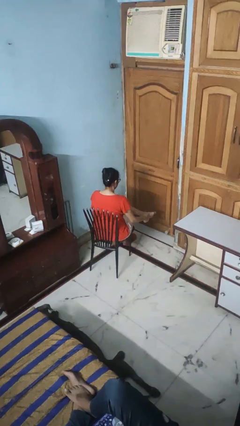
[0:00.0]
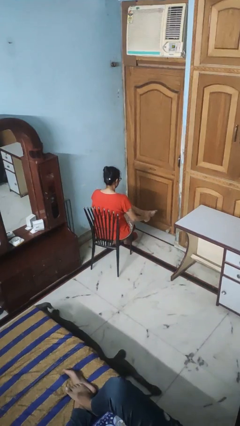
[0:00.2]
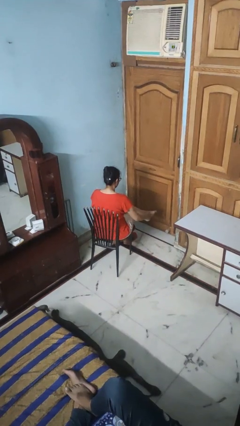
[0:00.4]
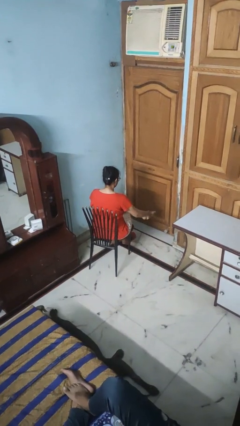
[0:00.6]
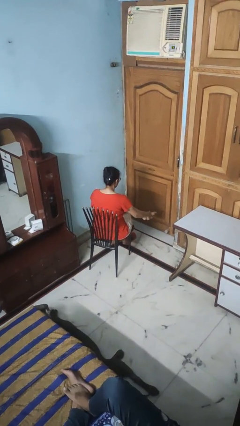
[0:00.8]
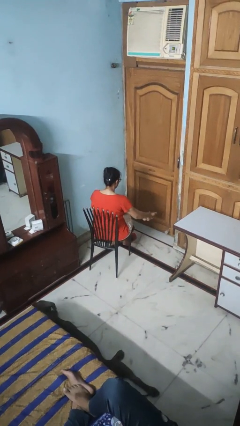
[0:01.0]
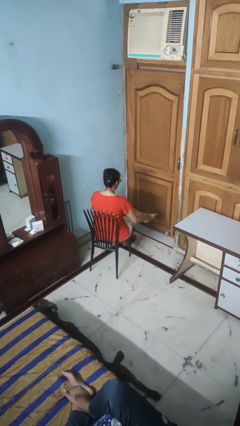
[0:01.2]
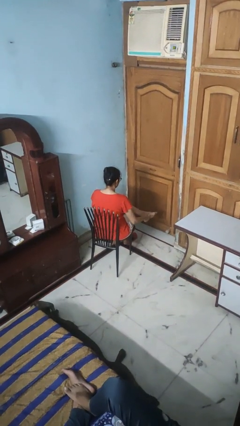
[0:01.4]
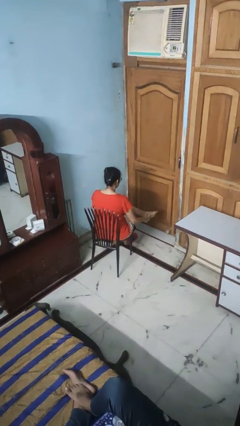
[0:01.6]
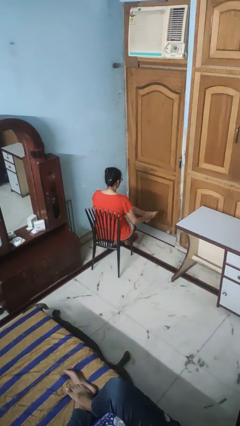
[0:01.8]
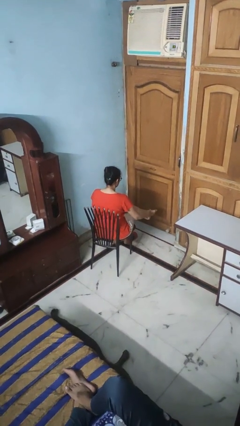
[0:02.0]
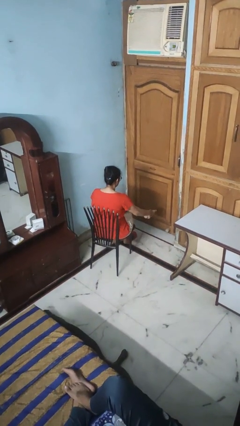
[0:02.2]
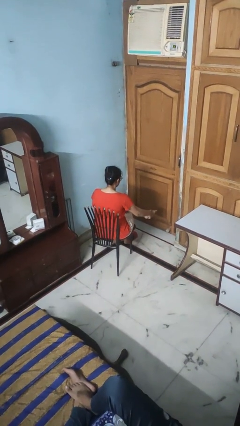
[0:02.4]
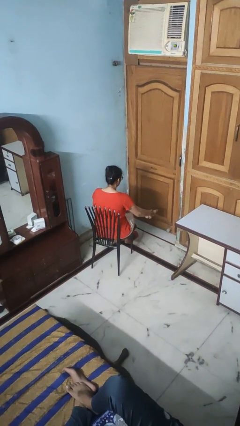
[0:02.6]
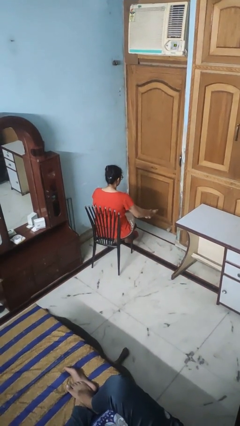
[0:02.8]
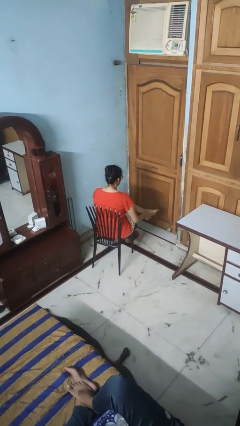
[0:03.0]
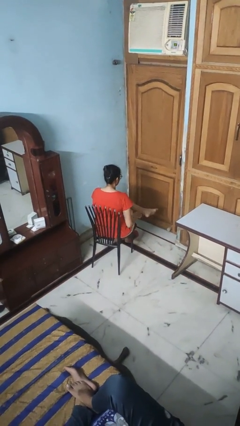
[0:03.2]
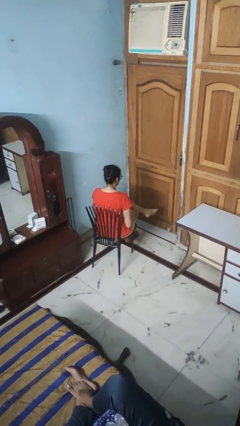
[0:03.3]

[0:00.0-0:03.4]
person rubs foot

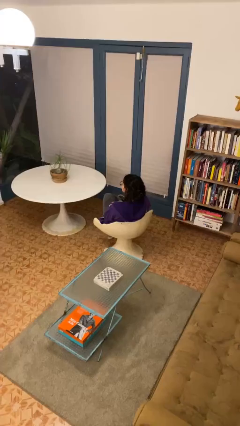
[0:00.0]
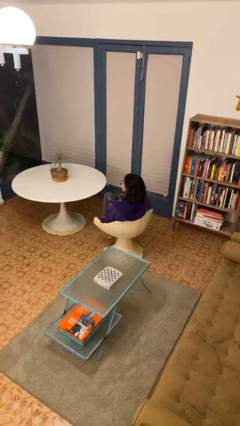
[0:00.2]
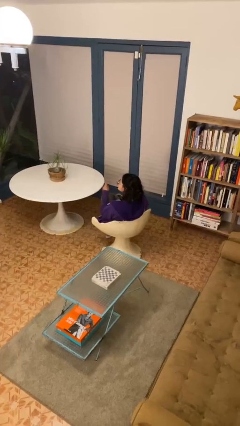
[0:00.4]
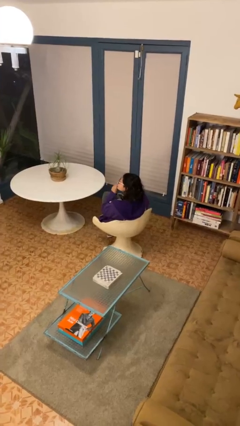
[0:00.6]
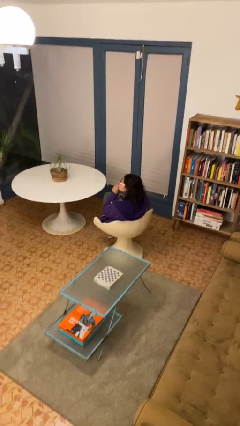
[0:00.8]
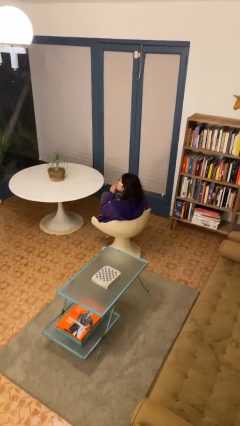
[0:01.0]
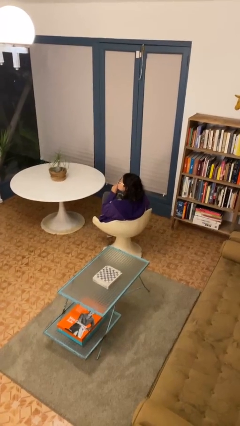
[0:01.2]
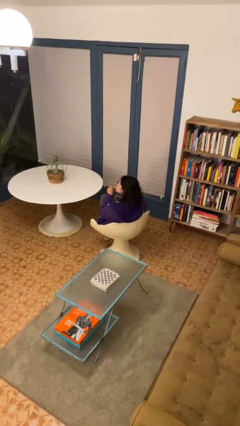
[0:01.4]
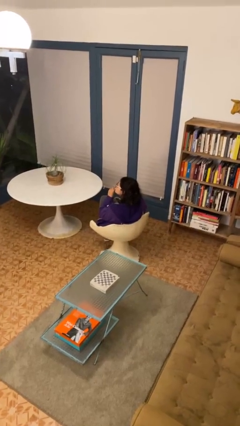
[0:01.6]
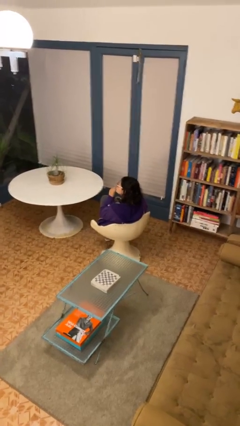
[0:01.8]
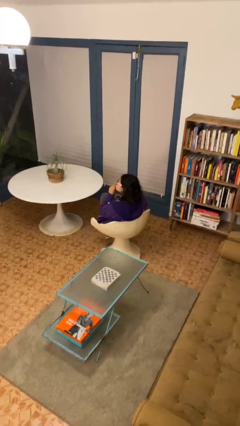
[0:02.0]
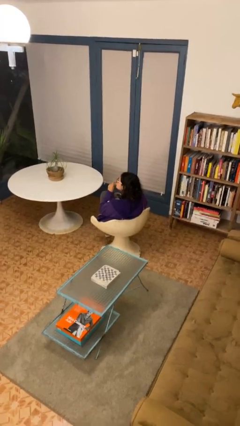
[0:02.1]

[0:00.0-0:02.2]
person gestures be quiet

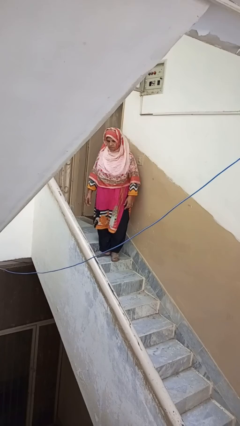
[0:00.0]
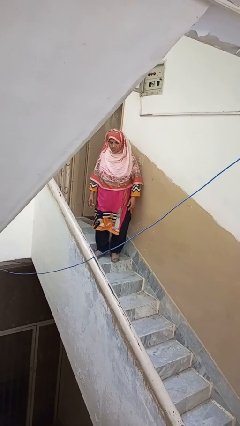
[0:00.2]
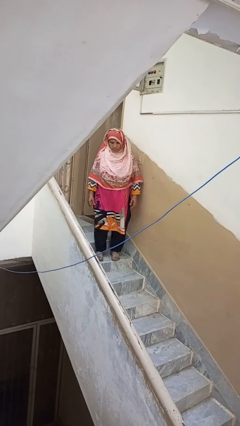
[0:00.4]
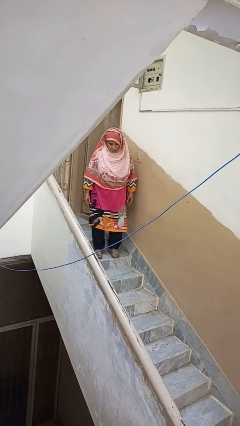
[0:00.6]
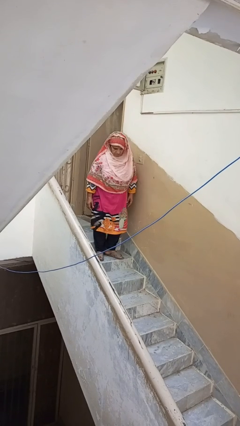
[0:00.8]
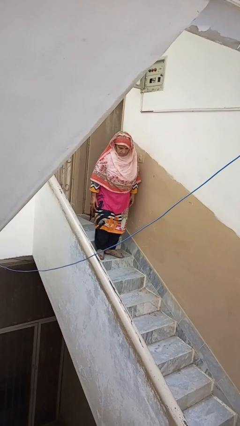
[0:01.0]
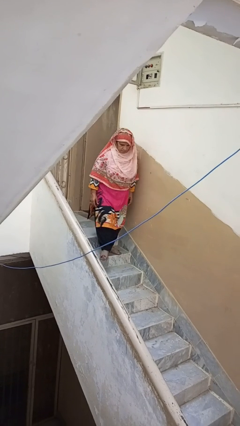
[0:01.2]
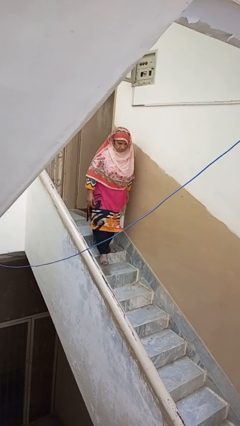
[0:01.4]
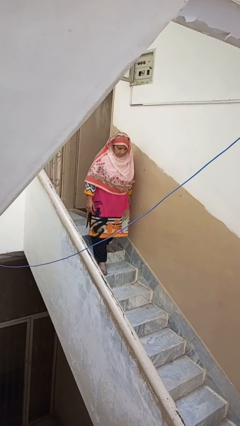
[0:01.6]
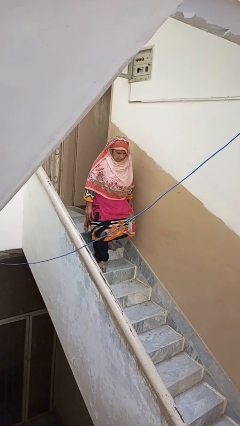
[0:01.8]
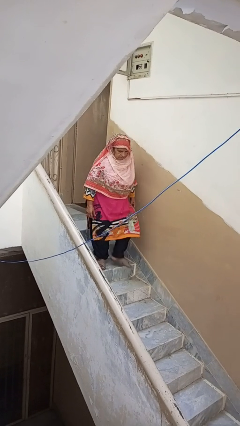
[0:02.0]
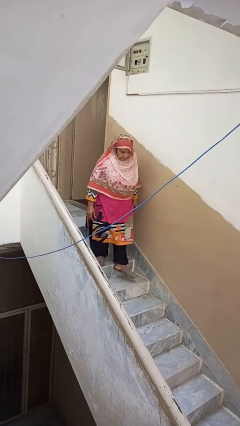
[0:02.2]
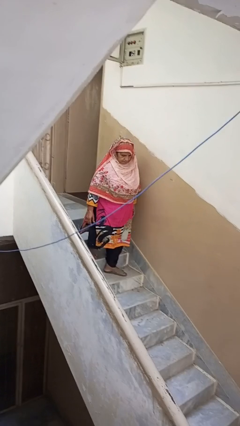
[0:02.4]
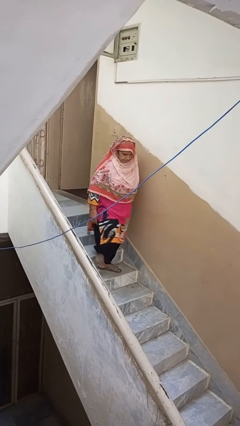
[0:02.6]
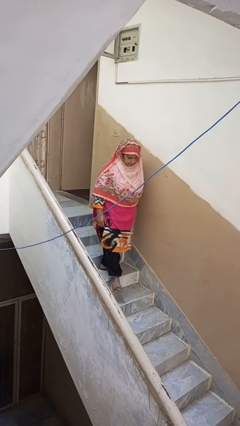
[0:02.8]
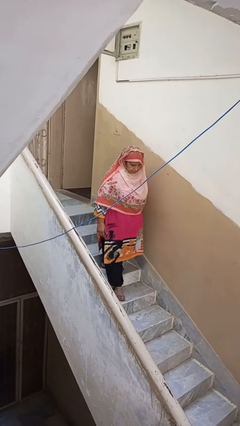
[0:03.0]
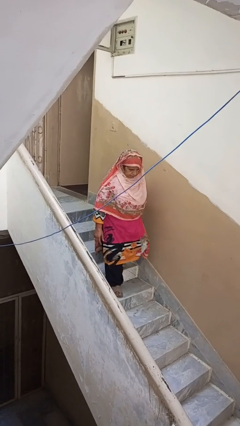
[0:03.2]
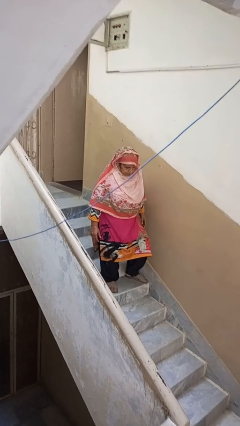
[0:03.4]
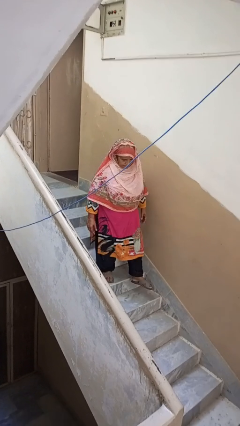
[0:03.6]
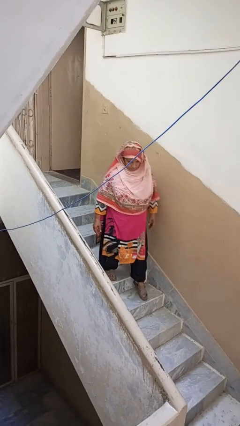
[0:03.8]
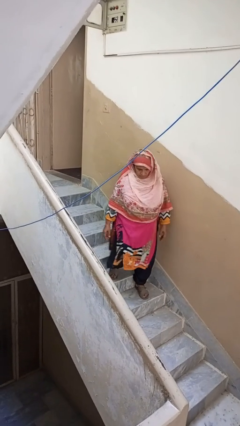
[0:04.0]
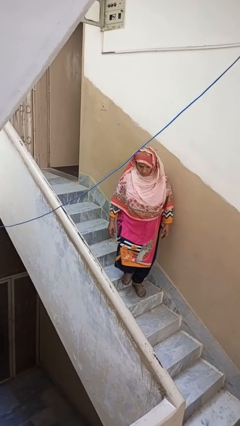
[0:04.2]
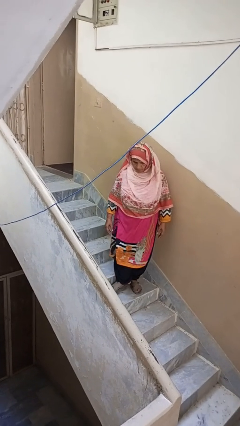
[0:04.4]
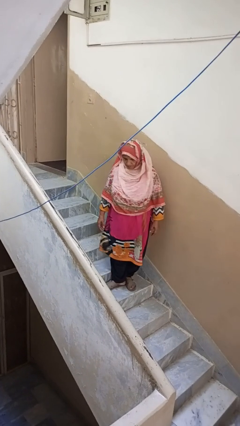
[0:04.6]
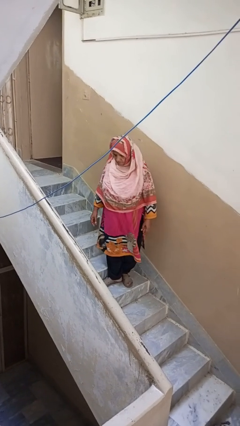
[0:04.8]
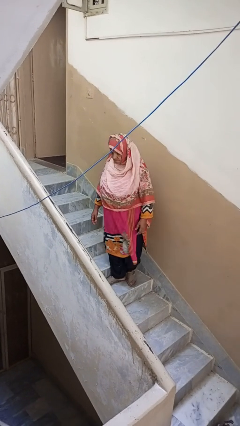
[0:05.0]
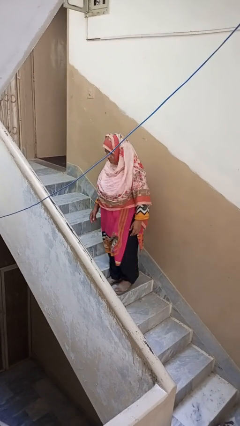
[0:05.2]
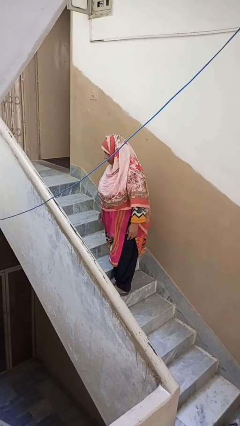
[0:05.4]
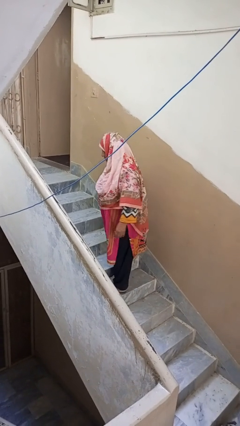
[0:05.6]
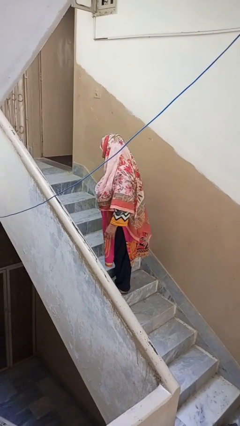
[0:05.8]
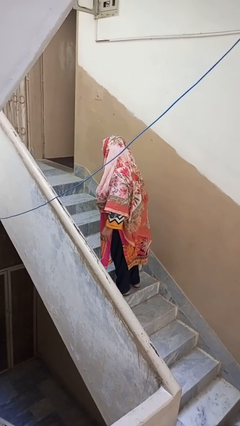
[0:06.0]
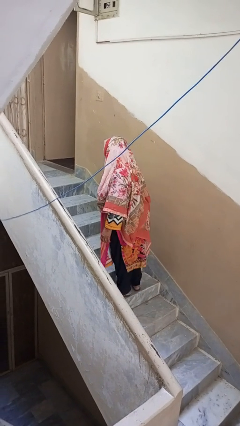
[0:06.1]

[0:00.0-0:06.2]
person climbs down stairs

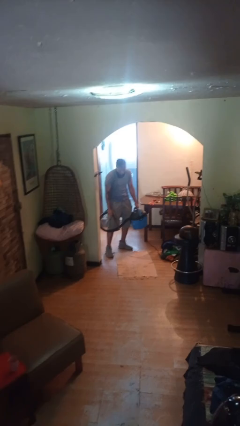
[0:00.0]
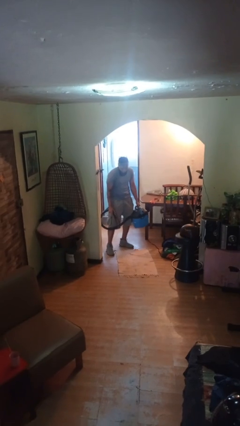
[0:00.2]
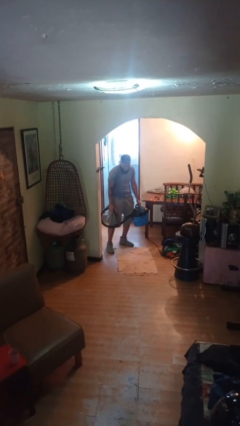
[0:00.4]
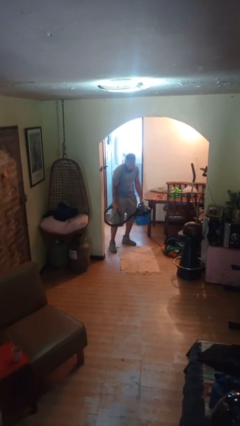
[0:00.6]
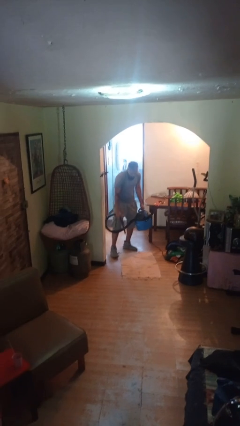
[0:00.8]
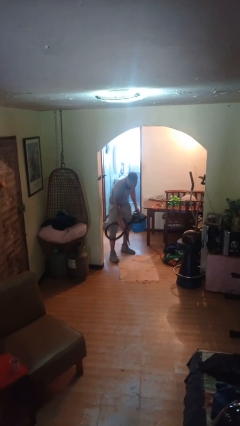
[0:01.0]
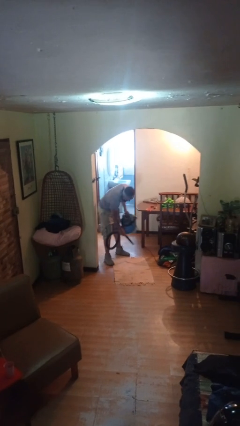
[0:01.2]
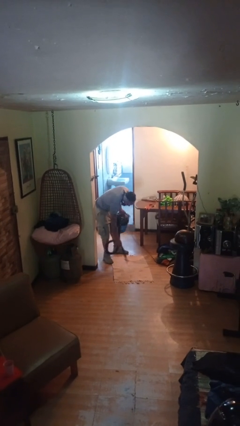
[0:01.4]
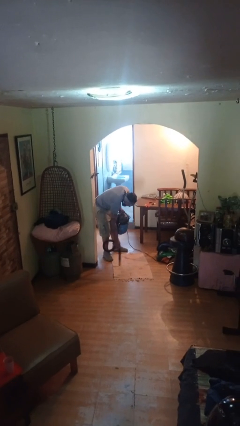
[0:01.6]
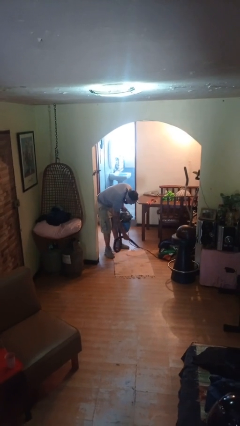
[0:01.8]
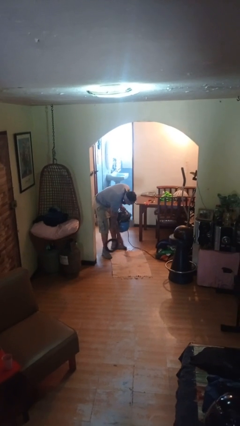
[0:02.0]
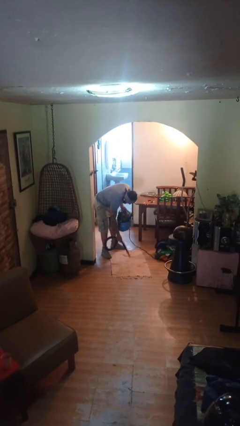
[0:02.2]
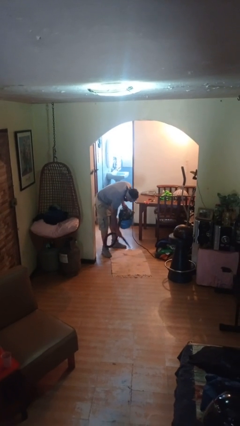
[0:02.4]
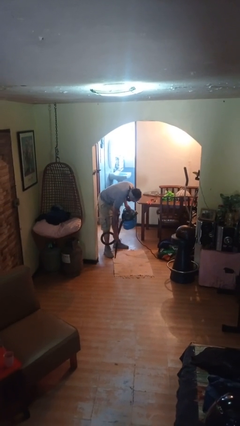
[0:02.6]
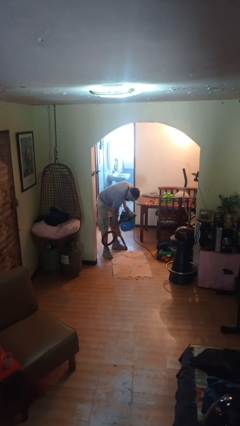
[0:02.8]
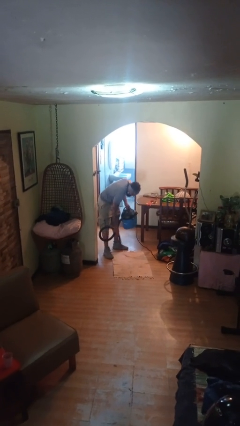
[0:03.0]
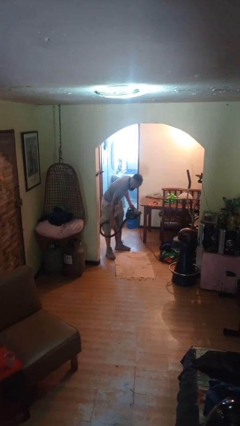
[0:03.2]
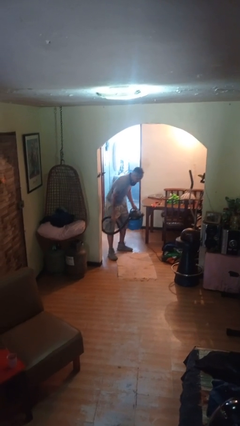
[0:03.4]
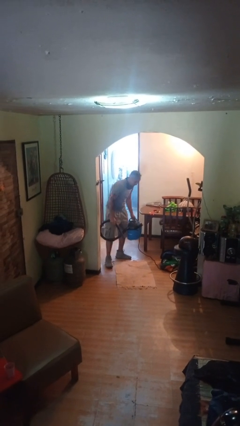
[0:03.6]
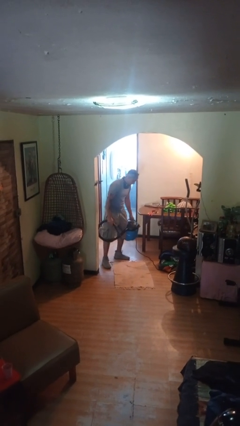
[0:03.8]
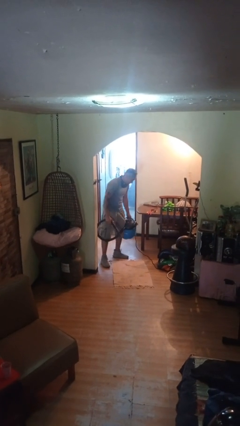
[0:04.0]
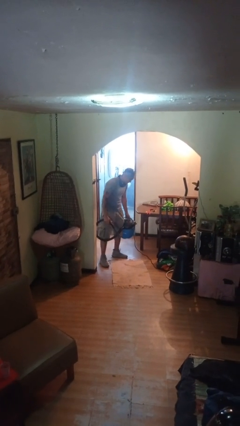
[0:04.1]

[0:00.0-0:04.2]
person vacuums carpet

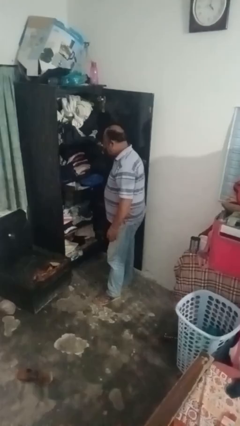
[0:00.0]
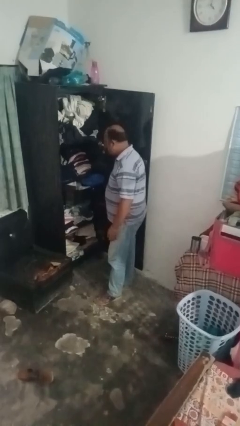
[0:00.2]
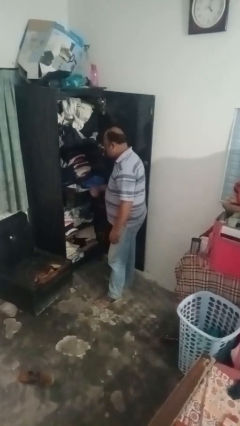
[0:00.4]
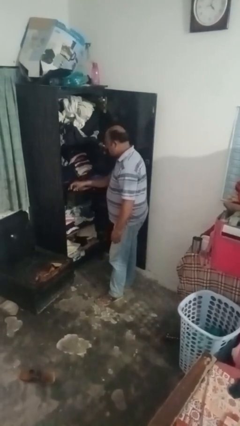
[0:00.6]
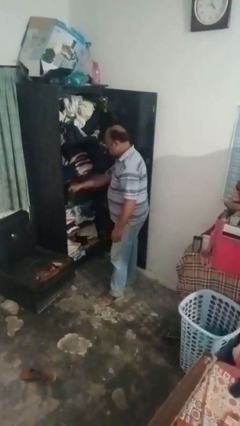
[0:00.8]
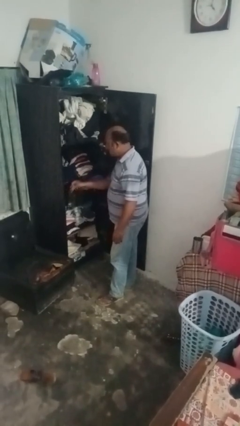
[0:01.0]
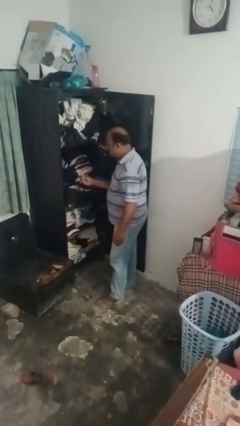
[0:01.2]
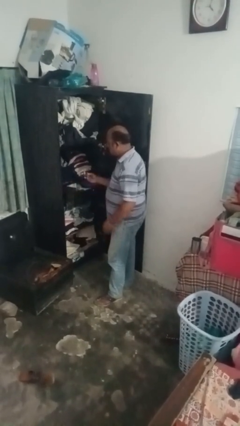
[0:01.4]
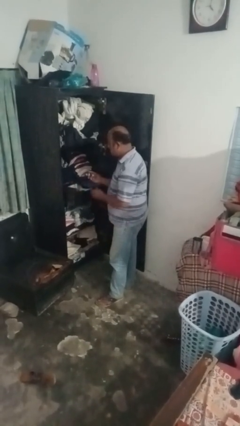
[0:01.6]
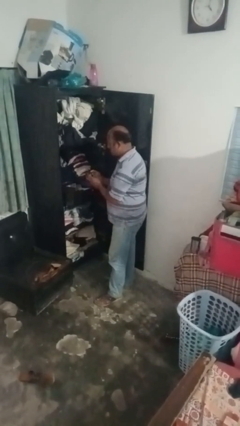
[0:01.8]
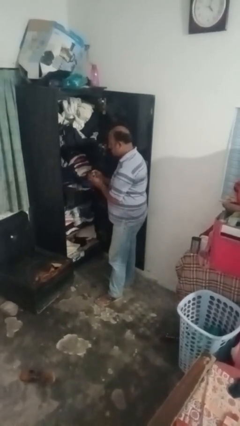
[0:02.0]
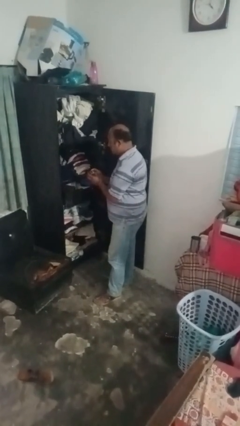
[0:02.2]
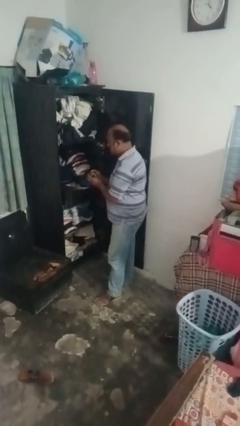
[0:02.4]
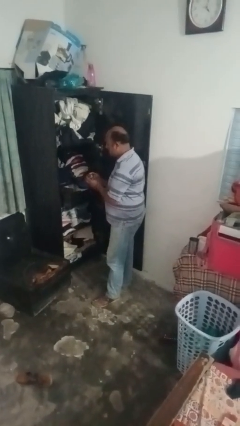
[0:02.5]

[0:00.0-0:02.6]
person puts clothes into dresser
